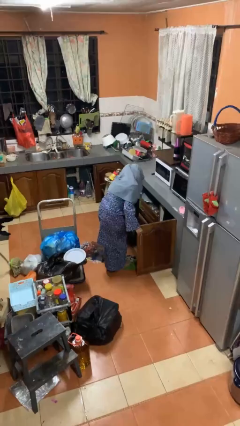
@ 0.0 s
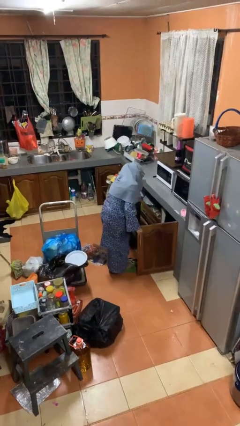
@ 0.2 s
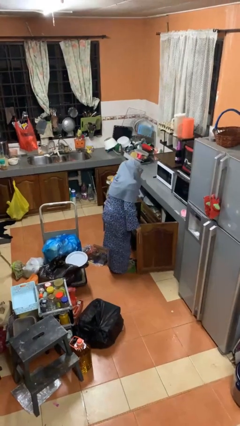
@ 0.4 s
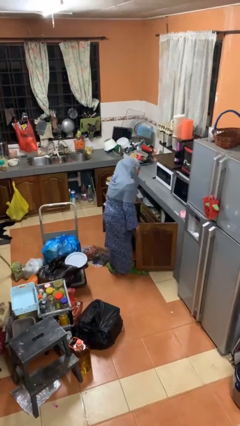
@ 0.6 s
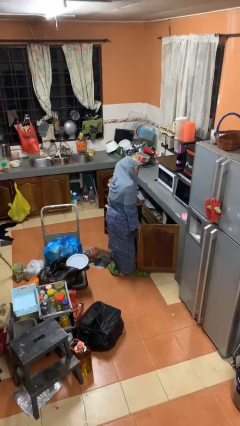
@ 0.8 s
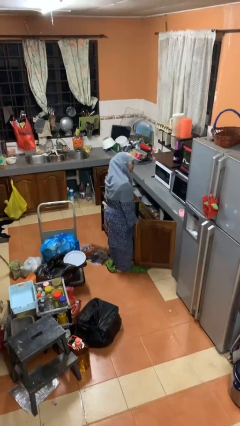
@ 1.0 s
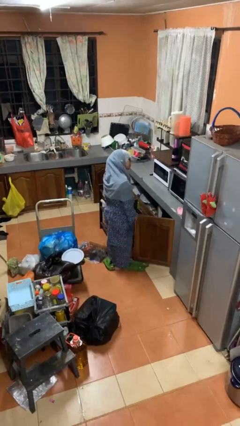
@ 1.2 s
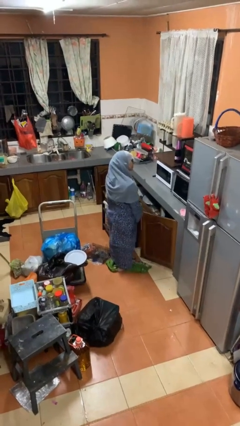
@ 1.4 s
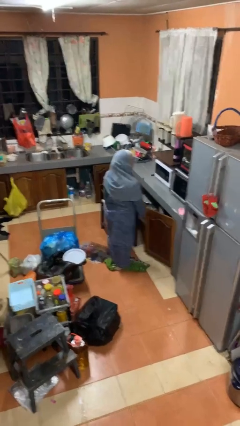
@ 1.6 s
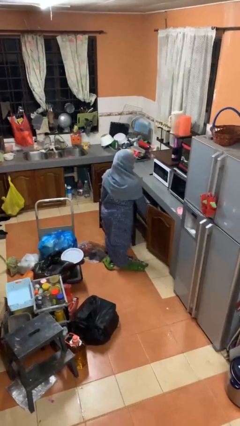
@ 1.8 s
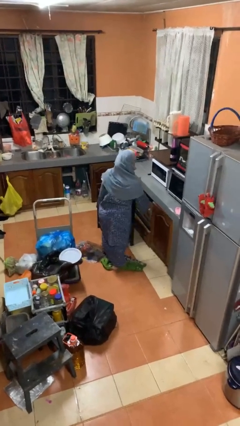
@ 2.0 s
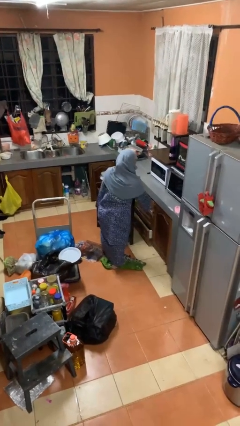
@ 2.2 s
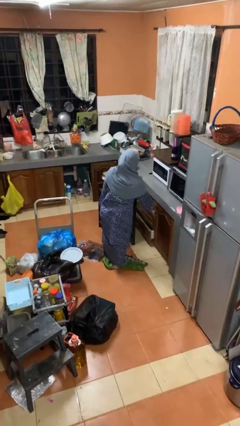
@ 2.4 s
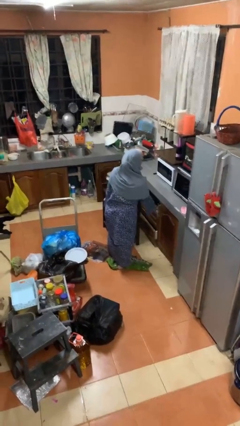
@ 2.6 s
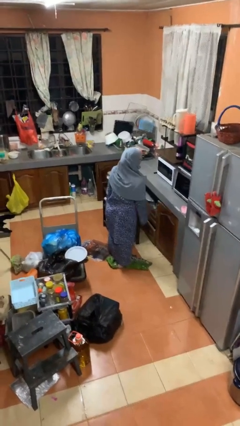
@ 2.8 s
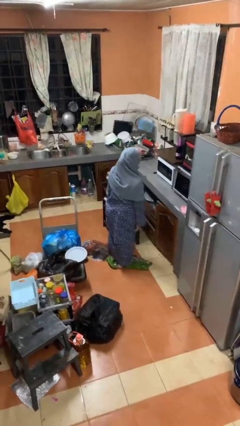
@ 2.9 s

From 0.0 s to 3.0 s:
person closes cabinet

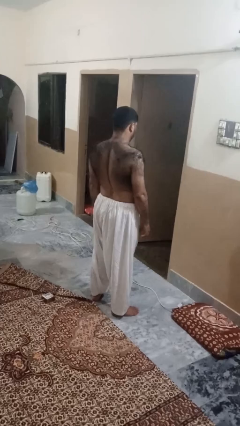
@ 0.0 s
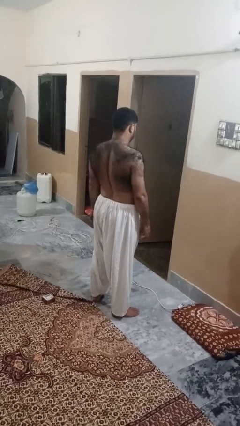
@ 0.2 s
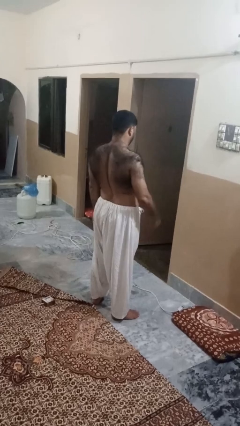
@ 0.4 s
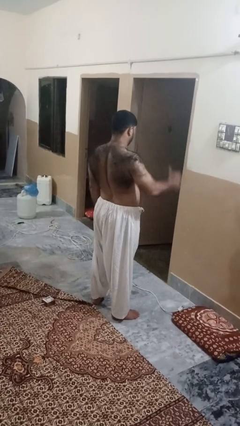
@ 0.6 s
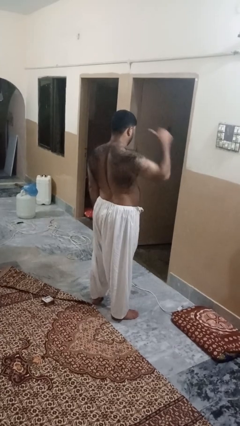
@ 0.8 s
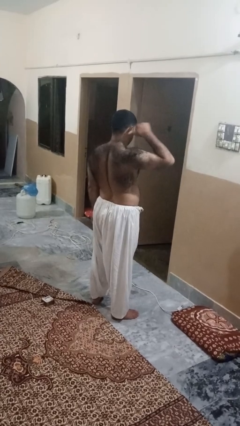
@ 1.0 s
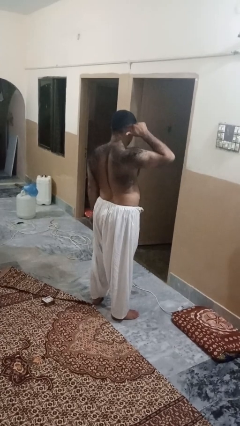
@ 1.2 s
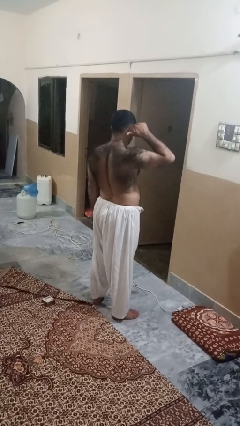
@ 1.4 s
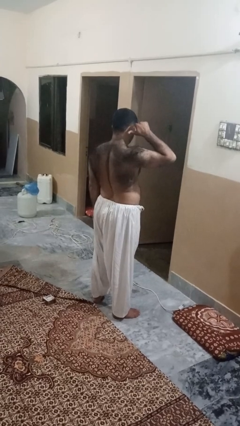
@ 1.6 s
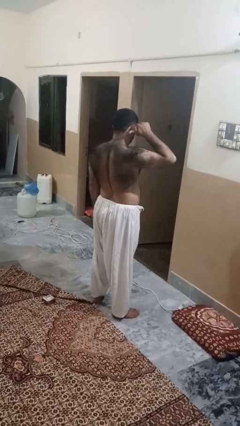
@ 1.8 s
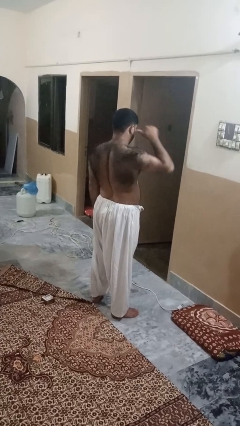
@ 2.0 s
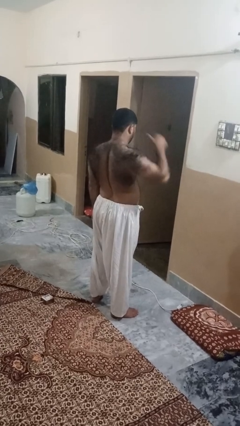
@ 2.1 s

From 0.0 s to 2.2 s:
person gestures behind me

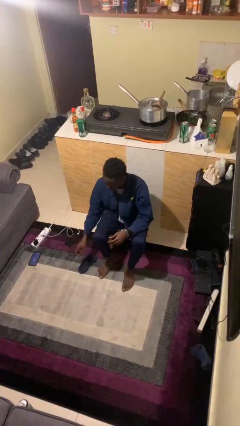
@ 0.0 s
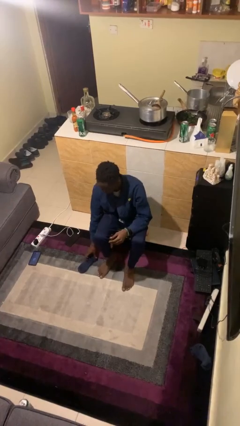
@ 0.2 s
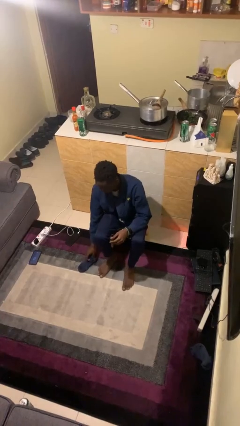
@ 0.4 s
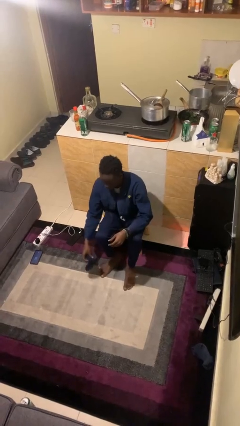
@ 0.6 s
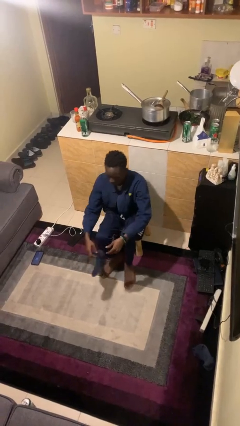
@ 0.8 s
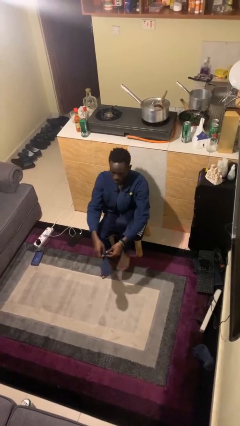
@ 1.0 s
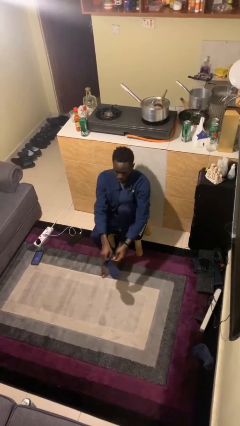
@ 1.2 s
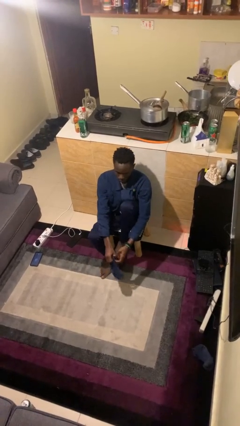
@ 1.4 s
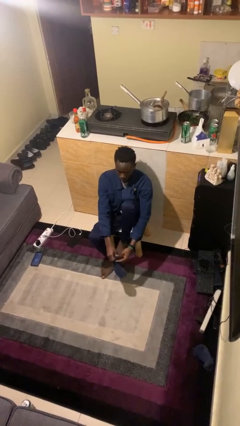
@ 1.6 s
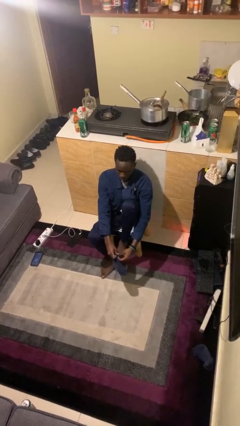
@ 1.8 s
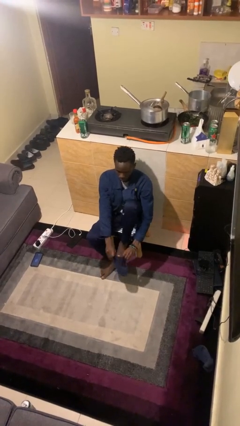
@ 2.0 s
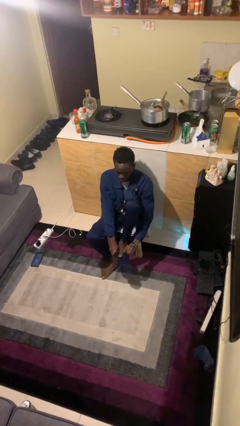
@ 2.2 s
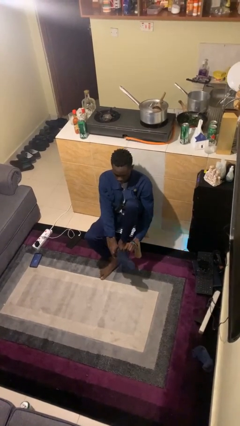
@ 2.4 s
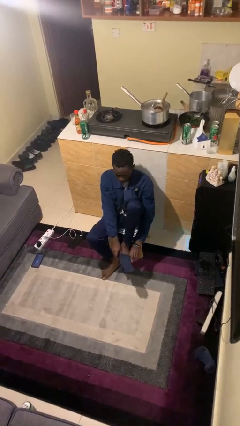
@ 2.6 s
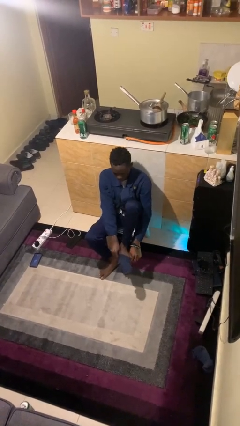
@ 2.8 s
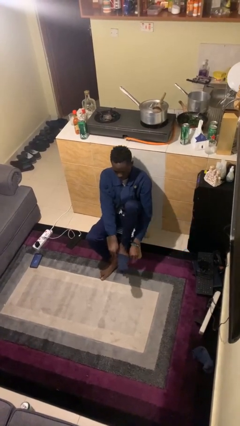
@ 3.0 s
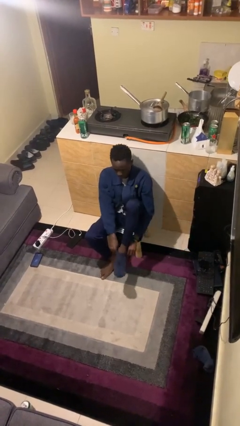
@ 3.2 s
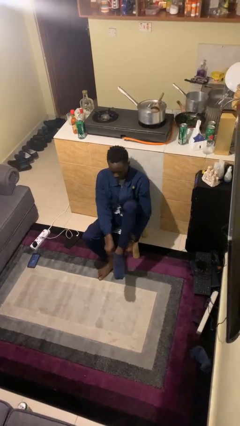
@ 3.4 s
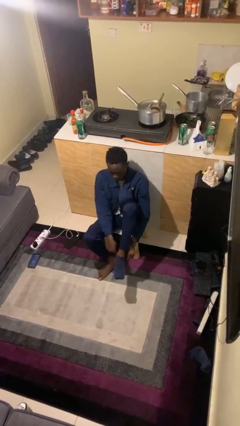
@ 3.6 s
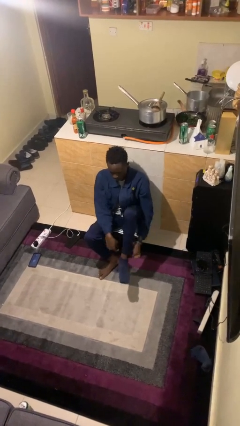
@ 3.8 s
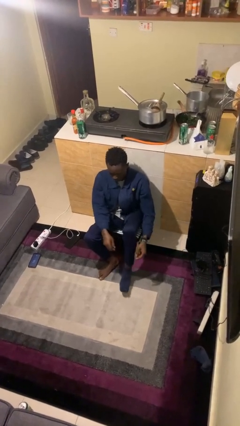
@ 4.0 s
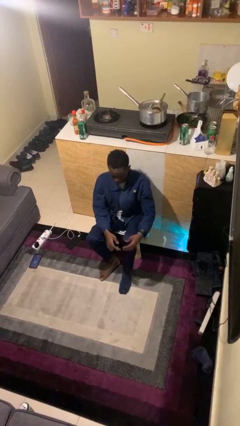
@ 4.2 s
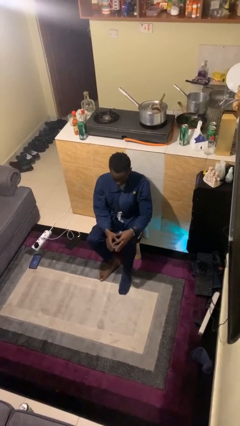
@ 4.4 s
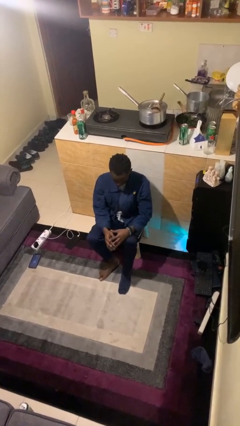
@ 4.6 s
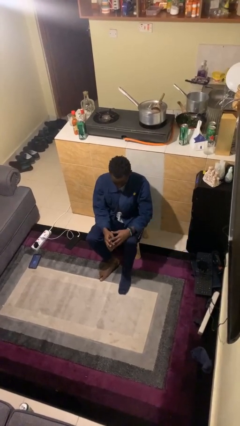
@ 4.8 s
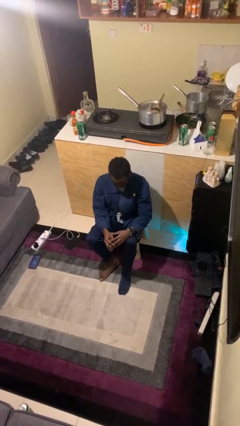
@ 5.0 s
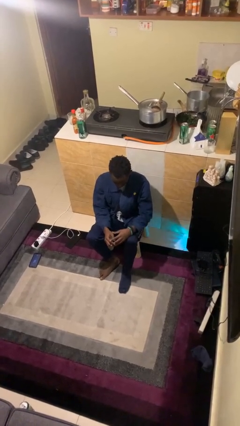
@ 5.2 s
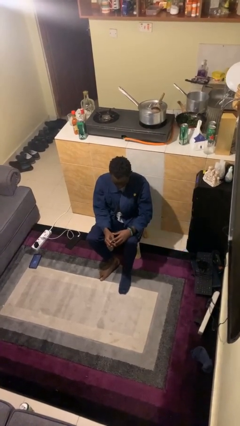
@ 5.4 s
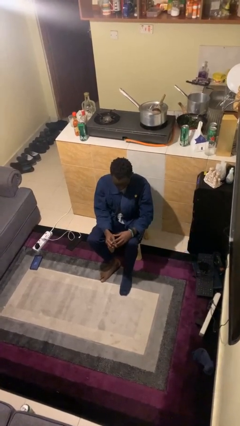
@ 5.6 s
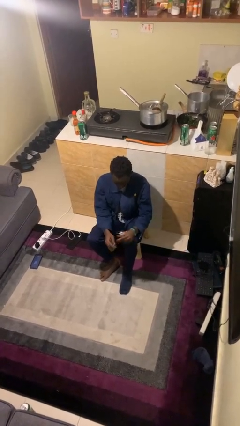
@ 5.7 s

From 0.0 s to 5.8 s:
person puts on socks

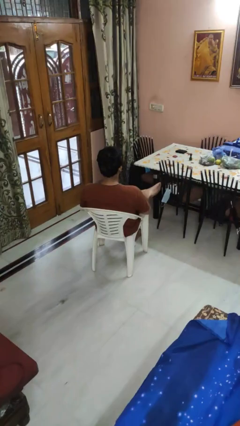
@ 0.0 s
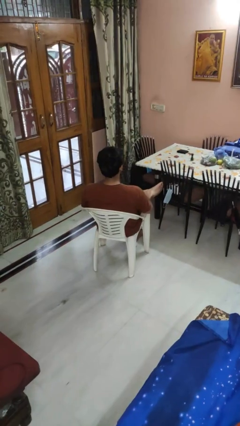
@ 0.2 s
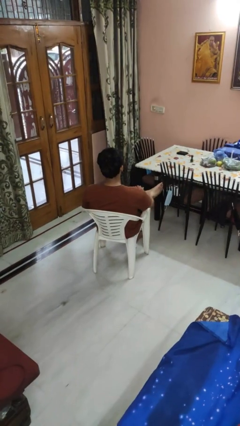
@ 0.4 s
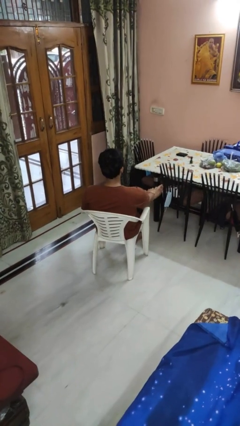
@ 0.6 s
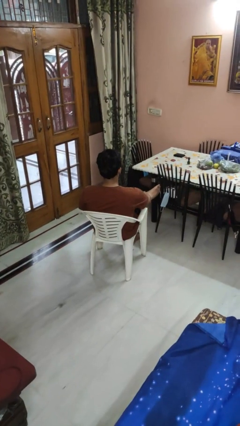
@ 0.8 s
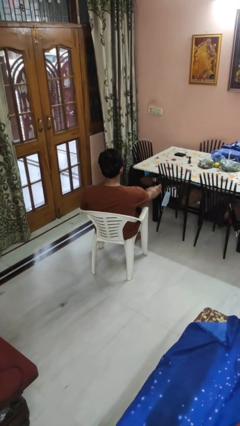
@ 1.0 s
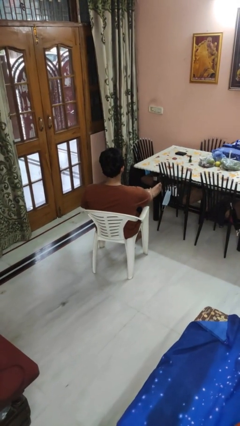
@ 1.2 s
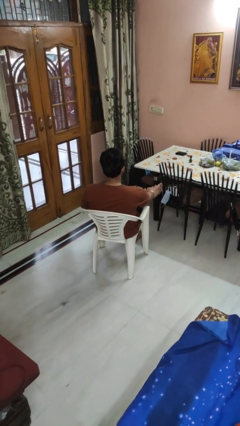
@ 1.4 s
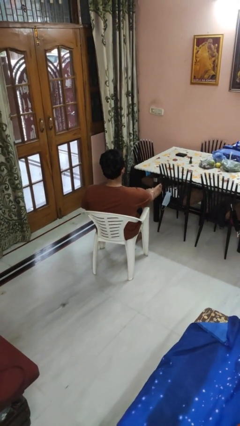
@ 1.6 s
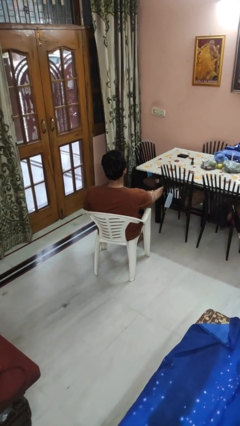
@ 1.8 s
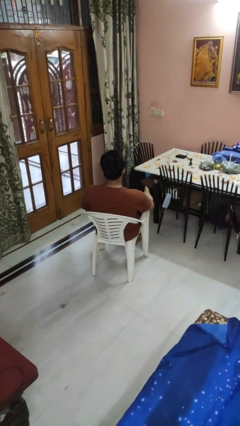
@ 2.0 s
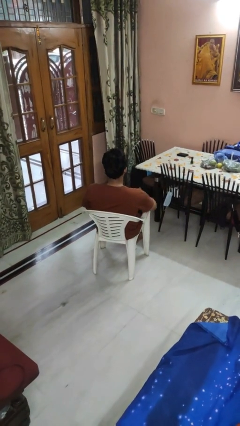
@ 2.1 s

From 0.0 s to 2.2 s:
person rubs foot

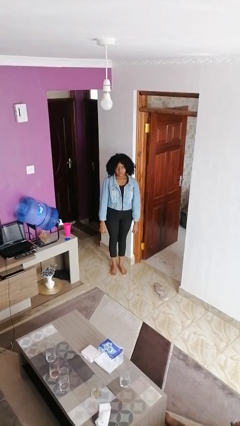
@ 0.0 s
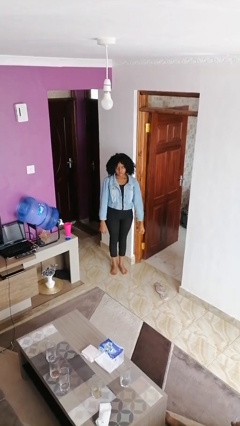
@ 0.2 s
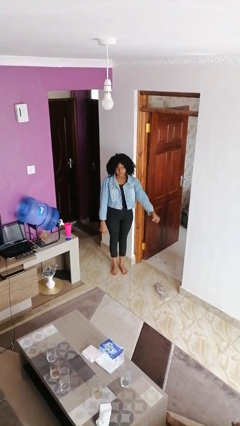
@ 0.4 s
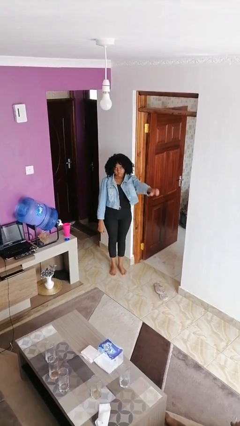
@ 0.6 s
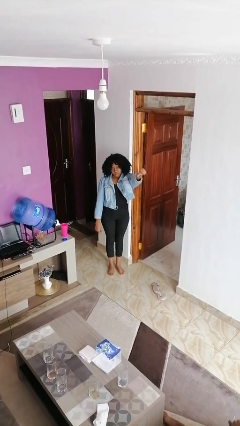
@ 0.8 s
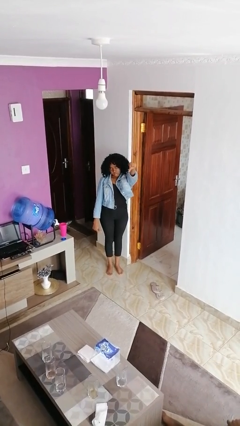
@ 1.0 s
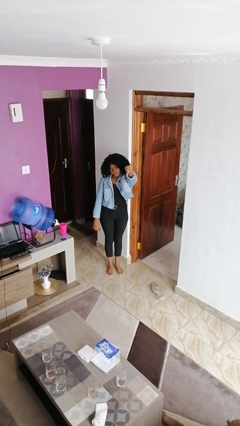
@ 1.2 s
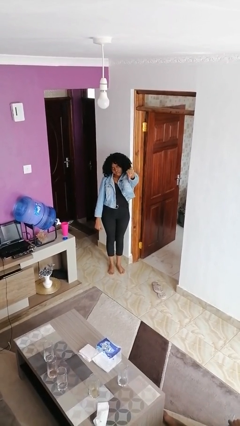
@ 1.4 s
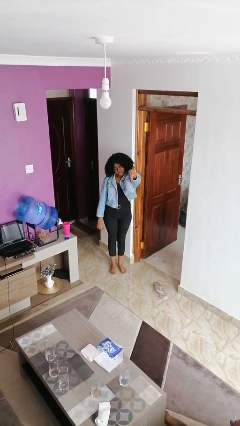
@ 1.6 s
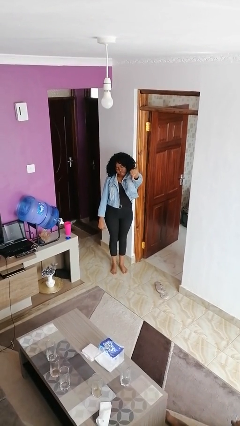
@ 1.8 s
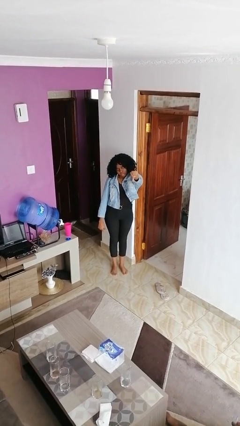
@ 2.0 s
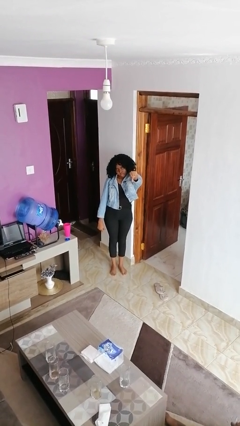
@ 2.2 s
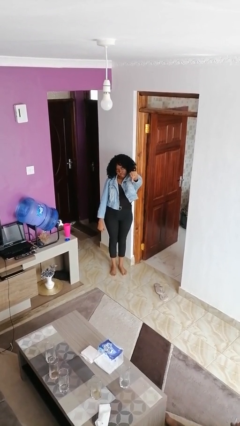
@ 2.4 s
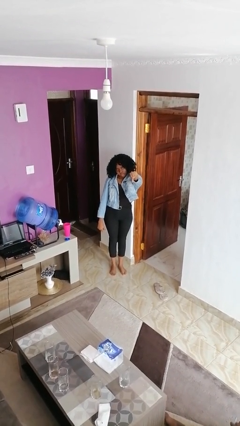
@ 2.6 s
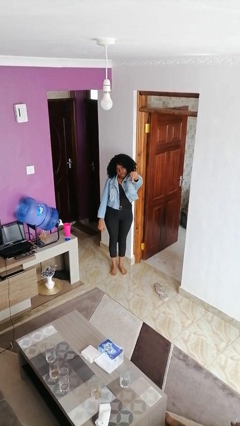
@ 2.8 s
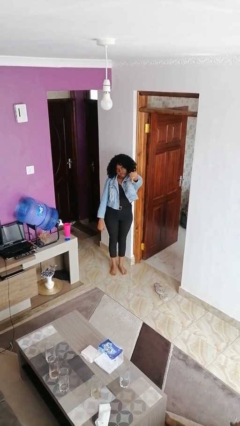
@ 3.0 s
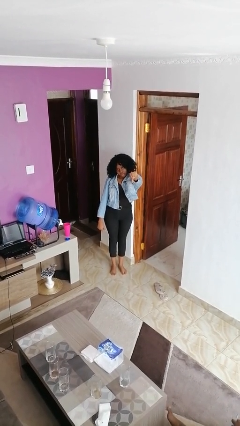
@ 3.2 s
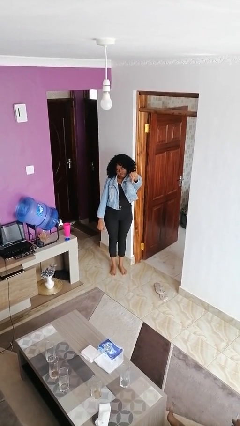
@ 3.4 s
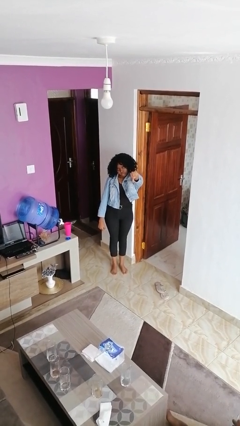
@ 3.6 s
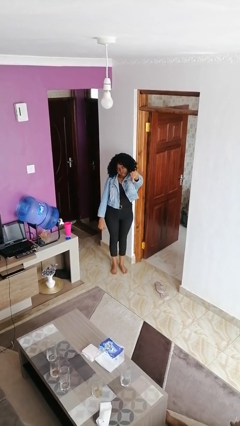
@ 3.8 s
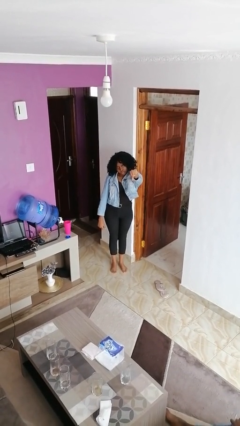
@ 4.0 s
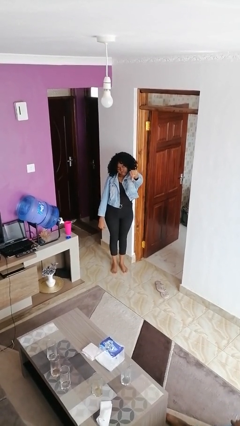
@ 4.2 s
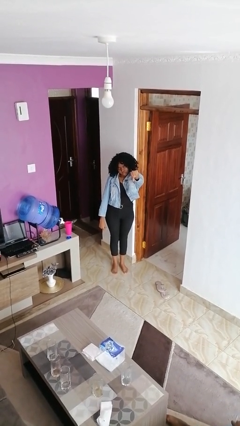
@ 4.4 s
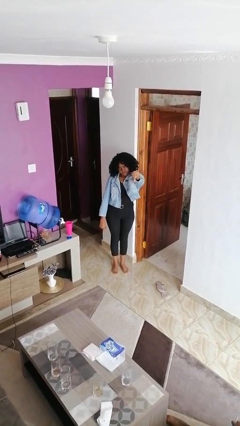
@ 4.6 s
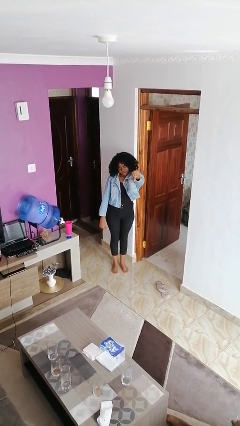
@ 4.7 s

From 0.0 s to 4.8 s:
person gestures thumbs down
